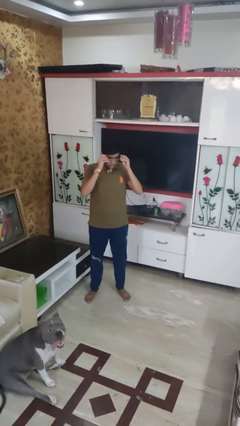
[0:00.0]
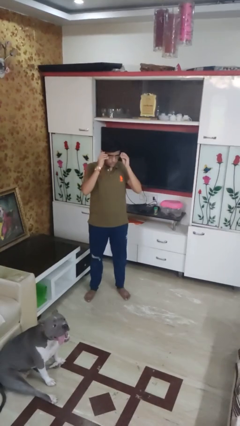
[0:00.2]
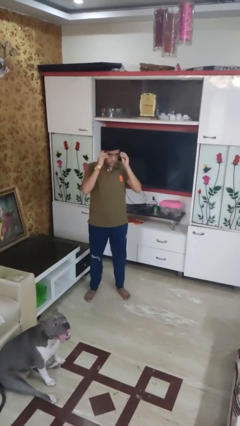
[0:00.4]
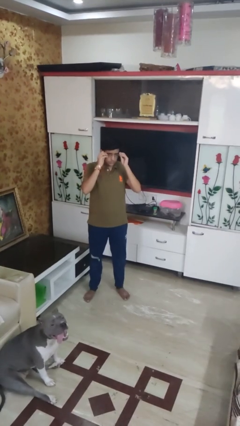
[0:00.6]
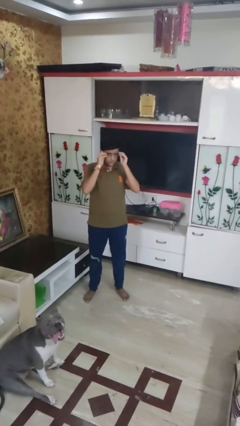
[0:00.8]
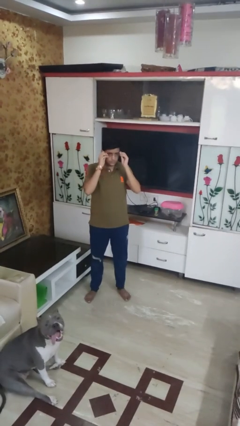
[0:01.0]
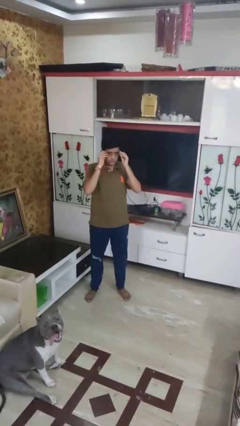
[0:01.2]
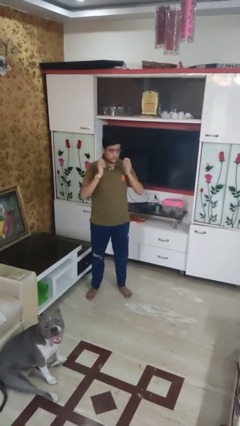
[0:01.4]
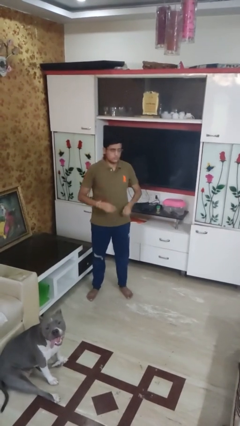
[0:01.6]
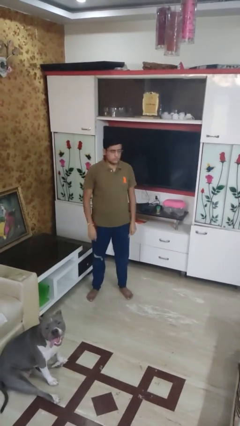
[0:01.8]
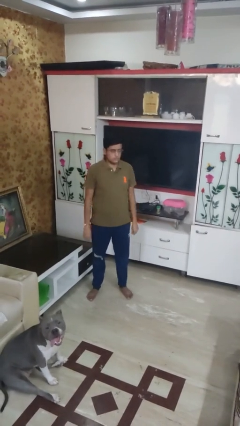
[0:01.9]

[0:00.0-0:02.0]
person puts on glasses

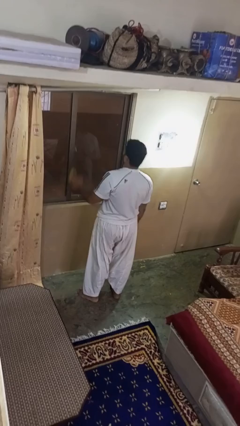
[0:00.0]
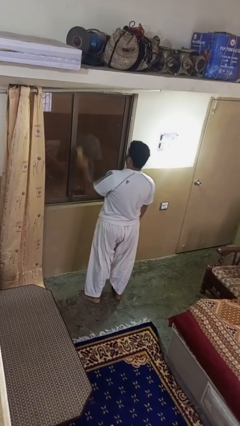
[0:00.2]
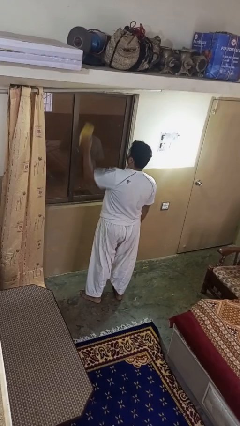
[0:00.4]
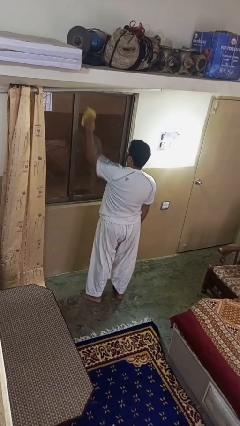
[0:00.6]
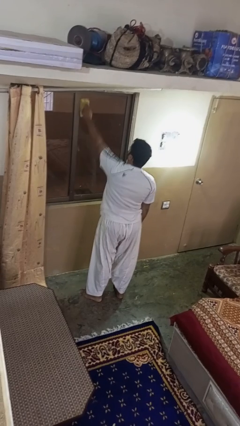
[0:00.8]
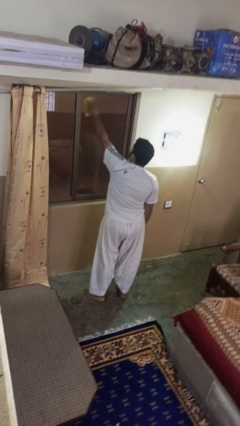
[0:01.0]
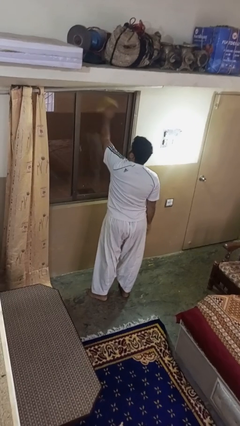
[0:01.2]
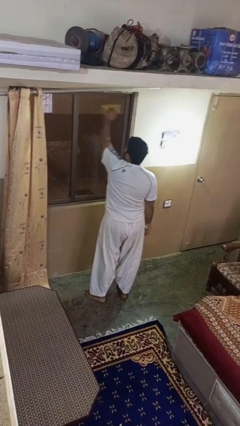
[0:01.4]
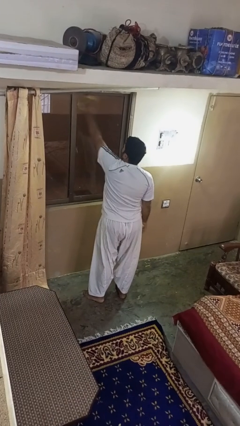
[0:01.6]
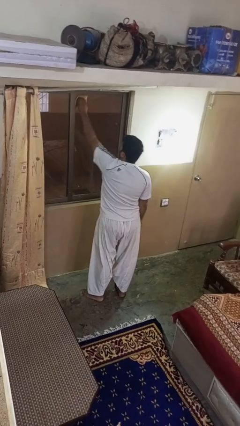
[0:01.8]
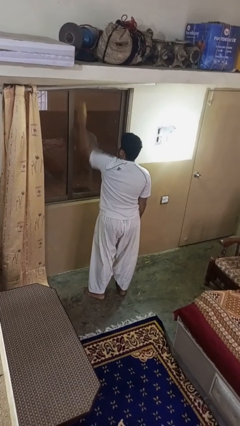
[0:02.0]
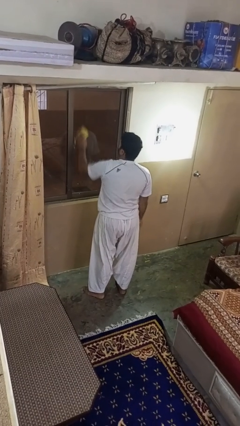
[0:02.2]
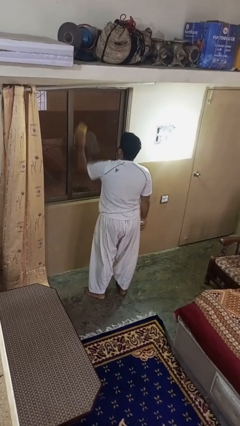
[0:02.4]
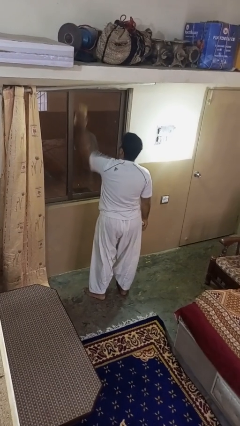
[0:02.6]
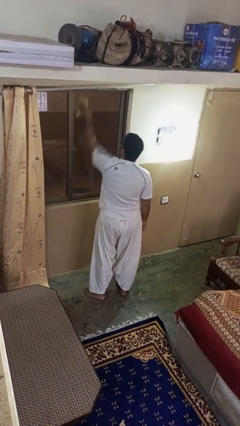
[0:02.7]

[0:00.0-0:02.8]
person washes window

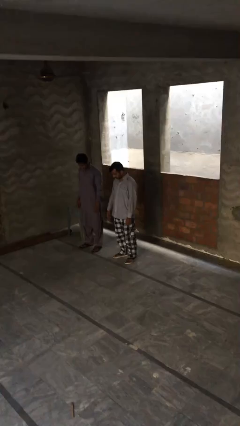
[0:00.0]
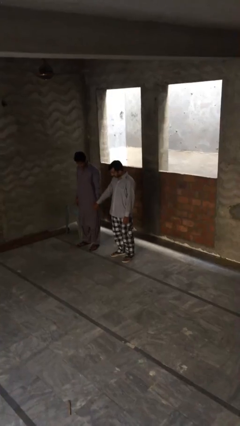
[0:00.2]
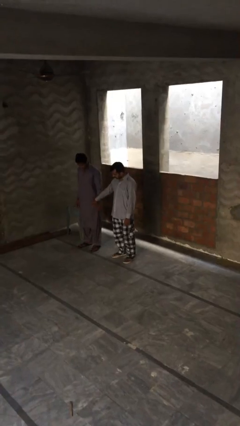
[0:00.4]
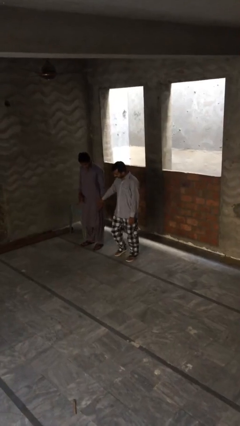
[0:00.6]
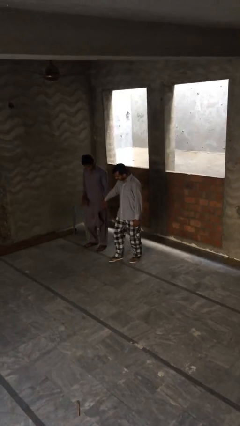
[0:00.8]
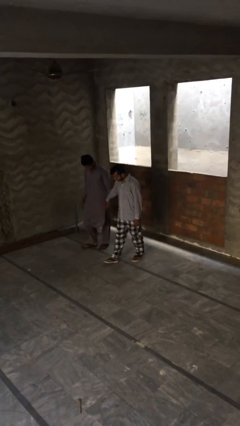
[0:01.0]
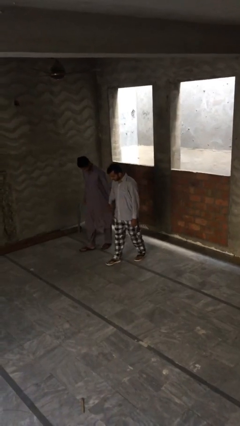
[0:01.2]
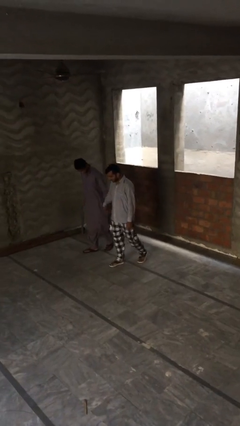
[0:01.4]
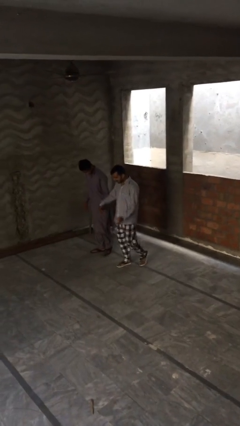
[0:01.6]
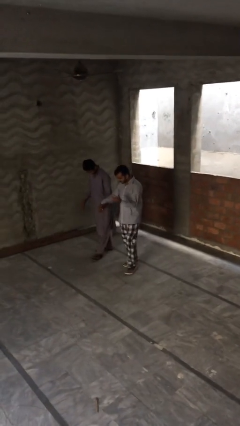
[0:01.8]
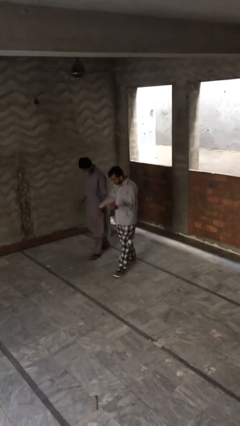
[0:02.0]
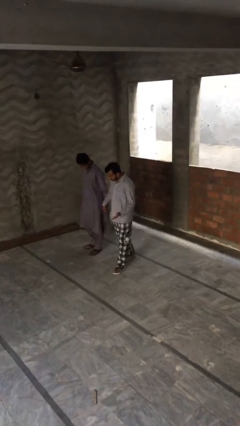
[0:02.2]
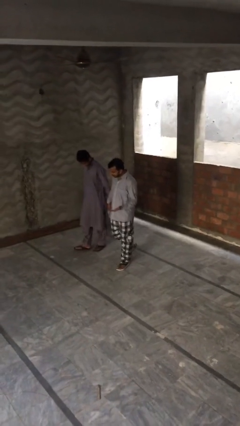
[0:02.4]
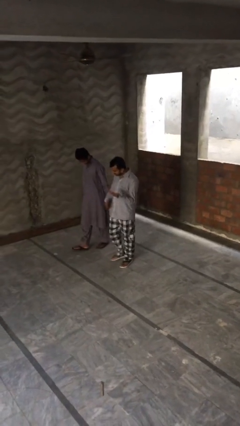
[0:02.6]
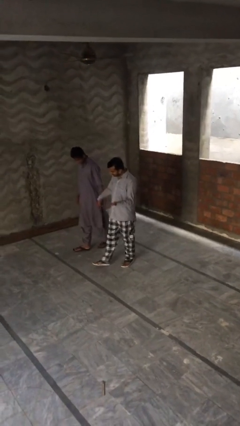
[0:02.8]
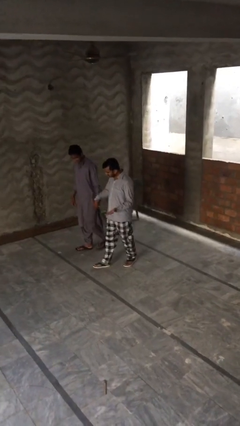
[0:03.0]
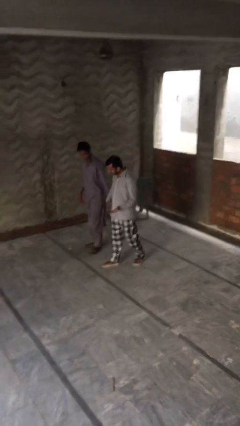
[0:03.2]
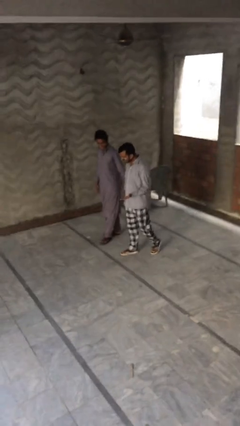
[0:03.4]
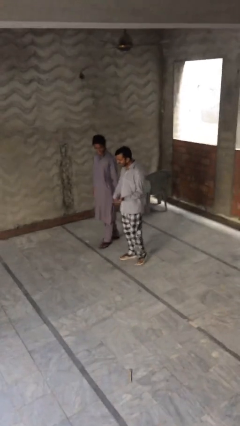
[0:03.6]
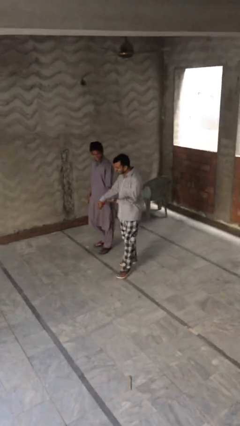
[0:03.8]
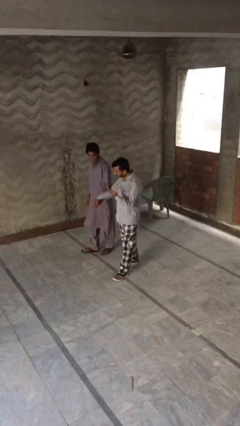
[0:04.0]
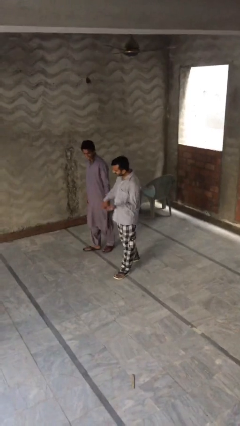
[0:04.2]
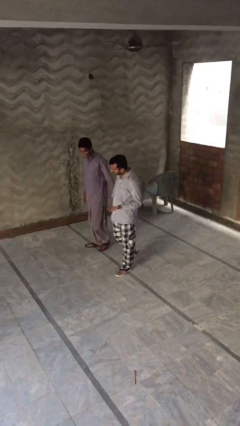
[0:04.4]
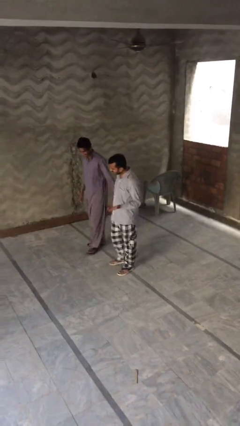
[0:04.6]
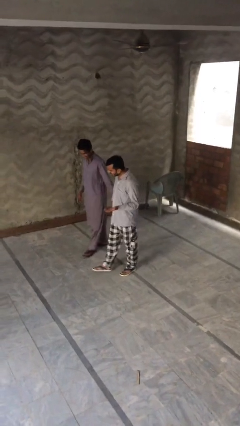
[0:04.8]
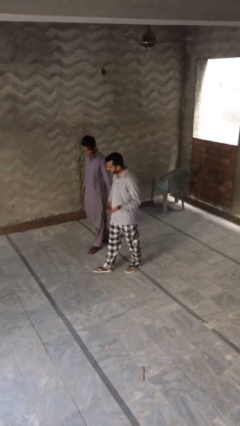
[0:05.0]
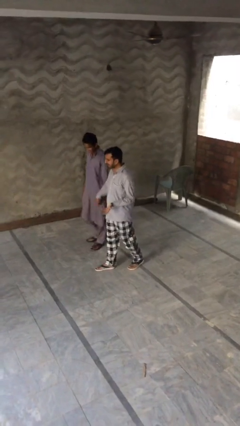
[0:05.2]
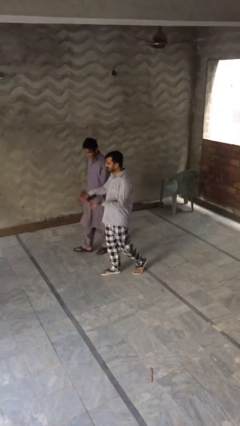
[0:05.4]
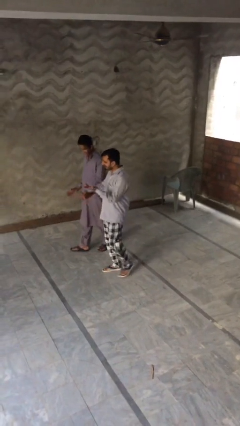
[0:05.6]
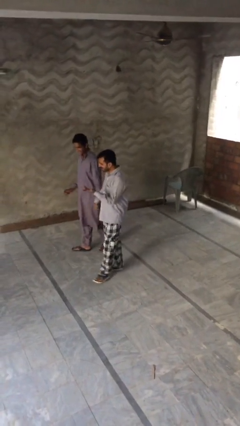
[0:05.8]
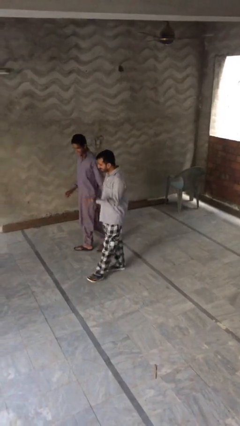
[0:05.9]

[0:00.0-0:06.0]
person holds hand

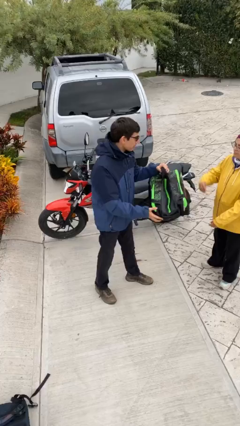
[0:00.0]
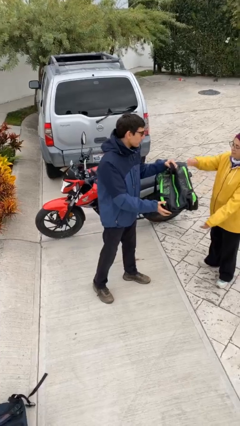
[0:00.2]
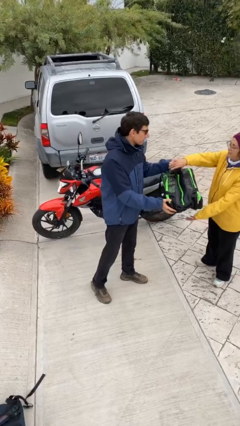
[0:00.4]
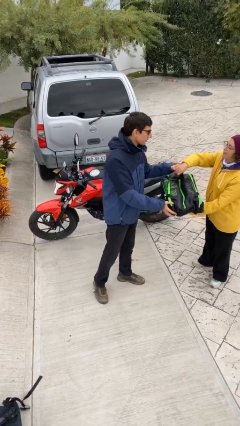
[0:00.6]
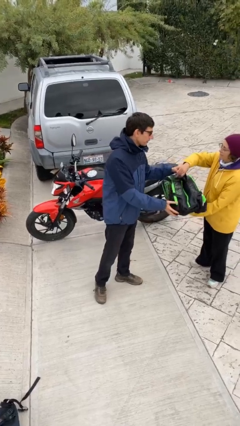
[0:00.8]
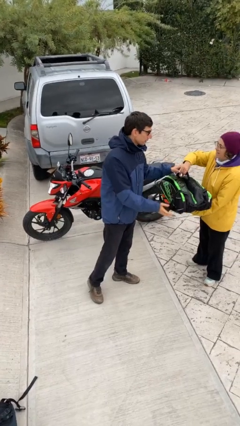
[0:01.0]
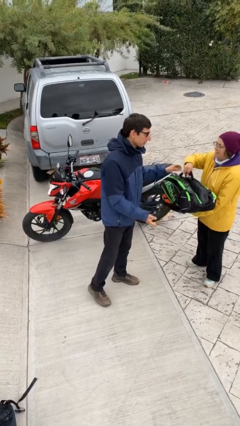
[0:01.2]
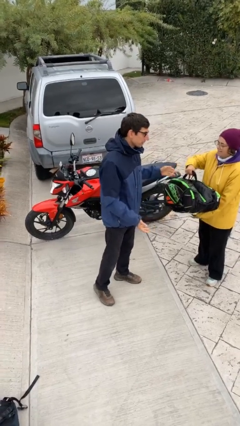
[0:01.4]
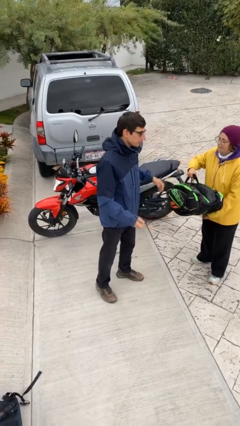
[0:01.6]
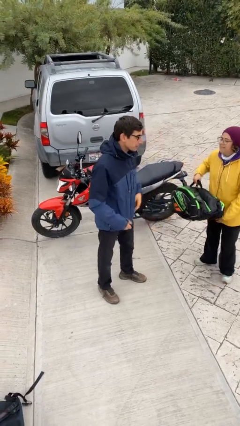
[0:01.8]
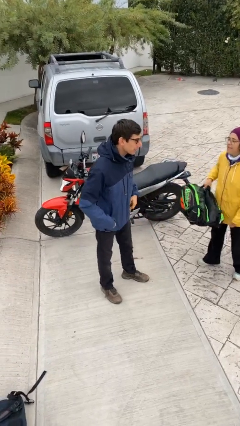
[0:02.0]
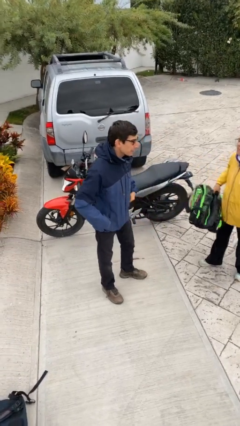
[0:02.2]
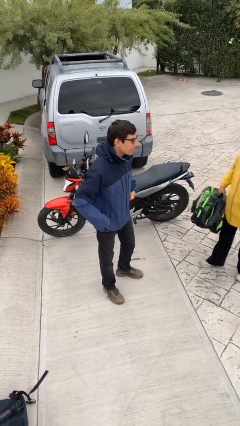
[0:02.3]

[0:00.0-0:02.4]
person transfers object to person

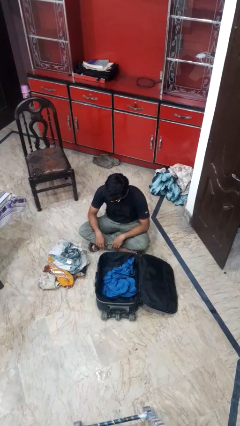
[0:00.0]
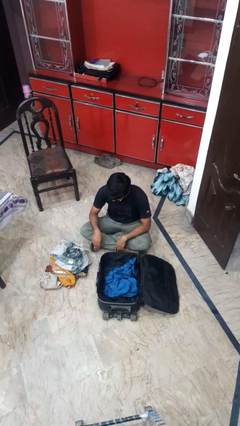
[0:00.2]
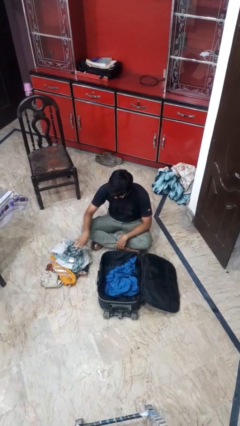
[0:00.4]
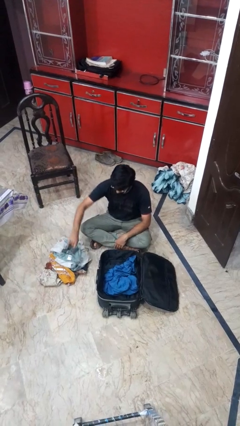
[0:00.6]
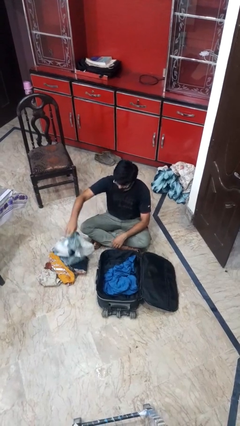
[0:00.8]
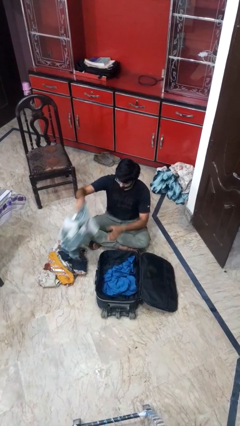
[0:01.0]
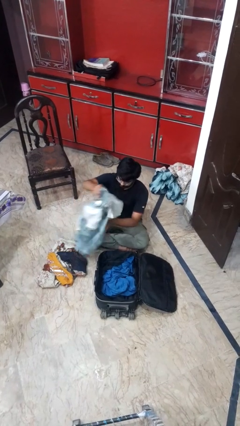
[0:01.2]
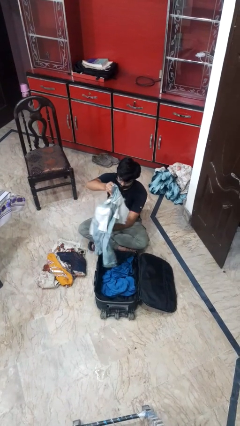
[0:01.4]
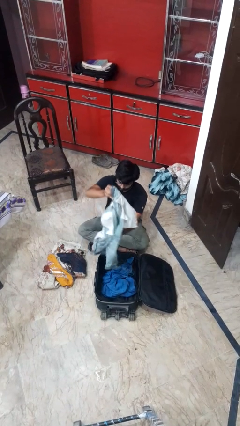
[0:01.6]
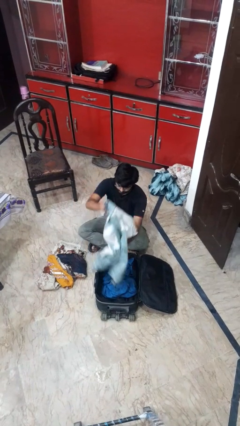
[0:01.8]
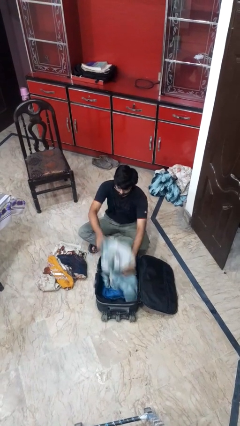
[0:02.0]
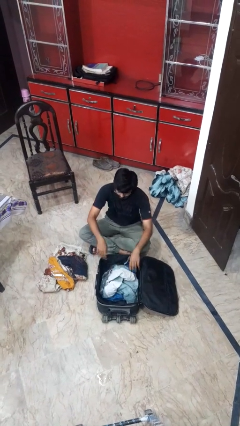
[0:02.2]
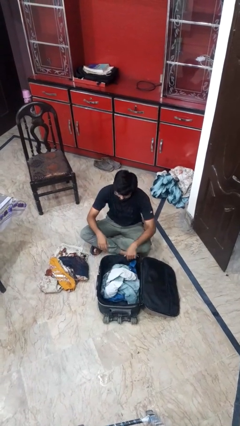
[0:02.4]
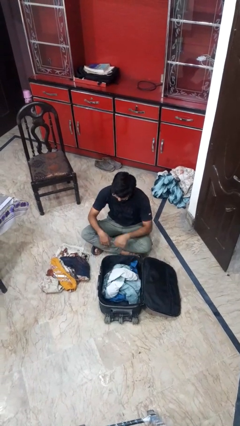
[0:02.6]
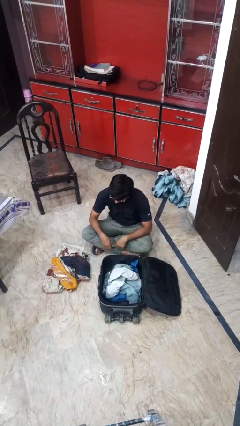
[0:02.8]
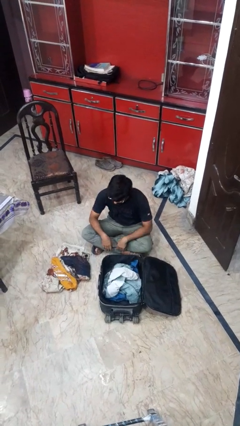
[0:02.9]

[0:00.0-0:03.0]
person loads clothes into suitcase

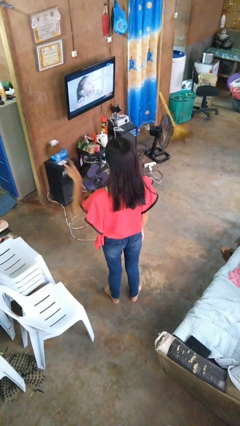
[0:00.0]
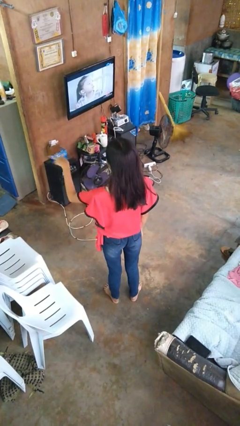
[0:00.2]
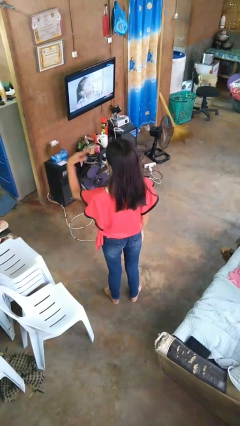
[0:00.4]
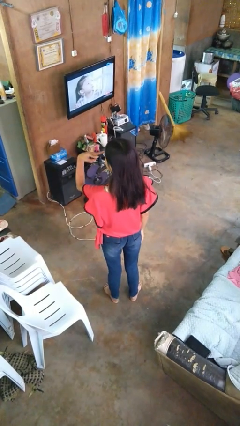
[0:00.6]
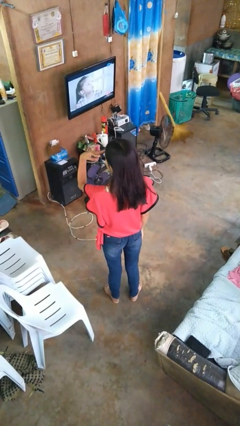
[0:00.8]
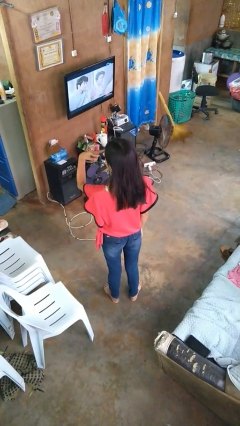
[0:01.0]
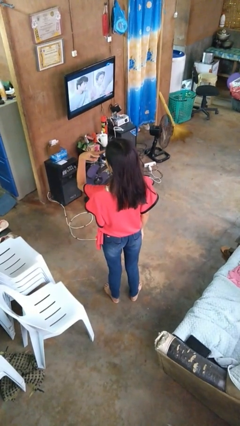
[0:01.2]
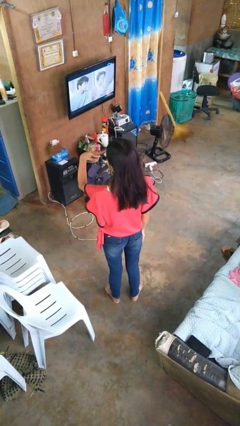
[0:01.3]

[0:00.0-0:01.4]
person gestures watch closely
